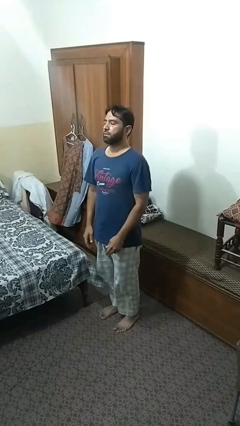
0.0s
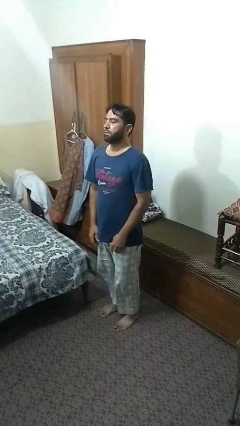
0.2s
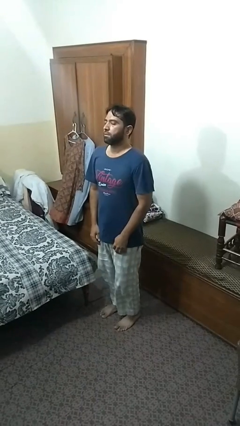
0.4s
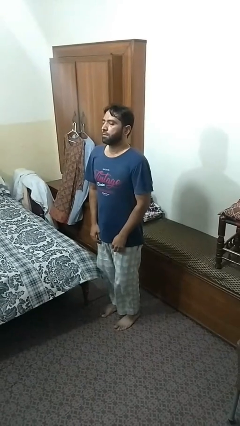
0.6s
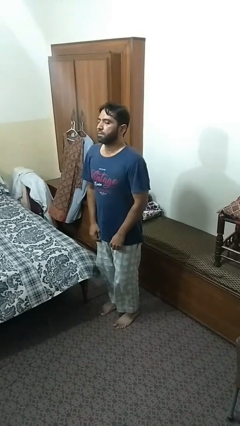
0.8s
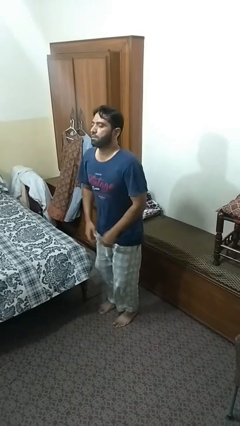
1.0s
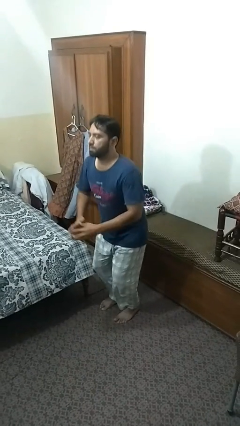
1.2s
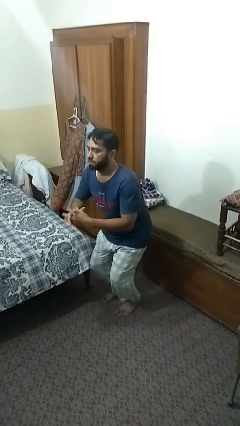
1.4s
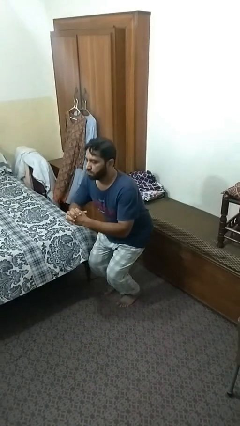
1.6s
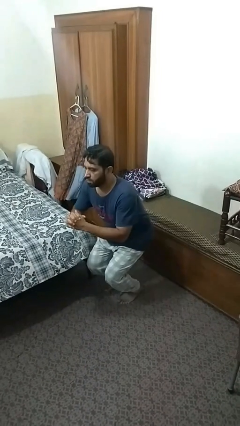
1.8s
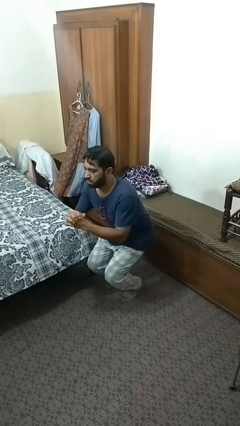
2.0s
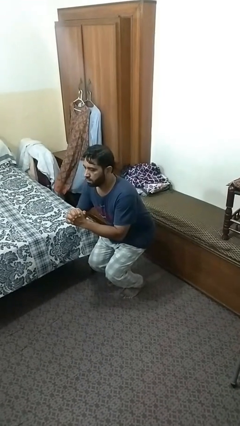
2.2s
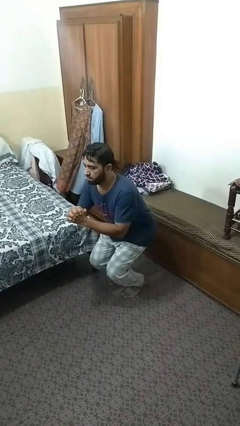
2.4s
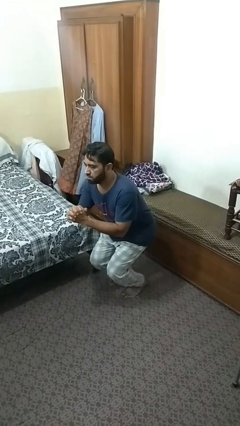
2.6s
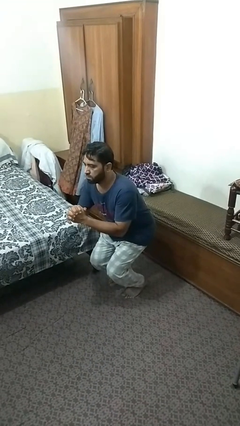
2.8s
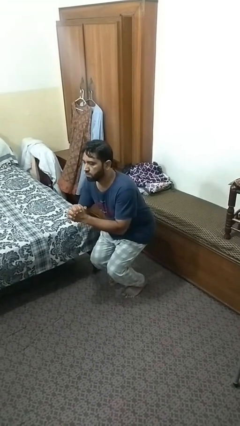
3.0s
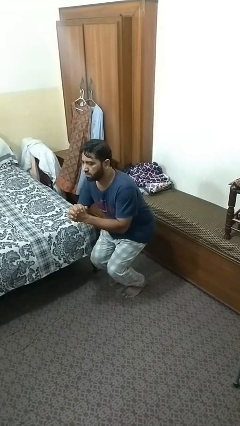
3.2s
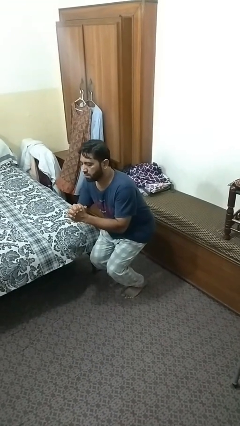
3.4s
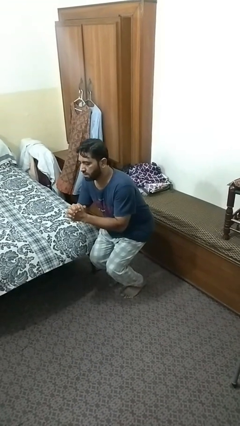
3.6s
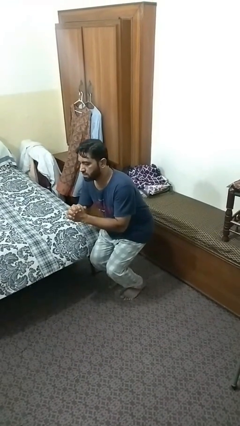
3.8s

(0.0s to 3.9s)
person squats

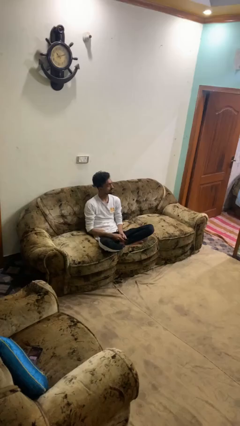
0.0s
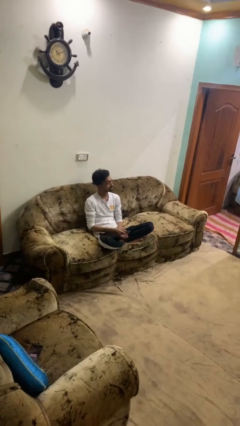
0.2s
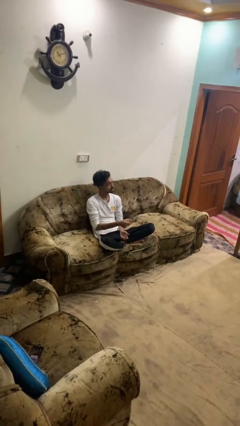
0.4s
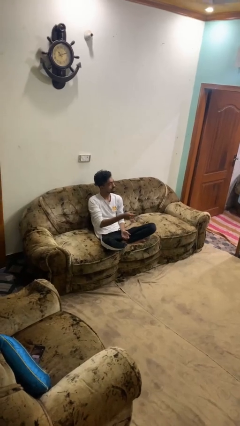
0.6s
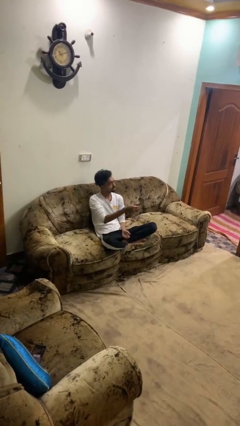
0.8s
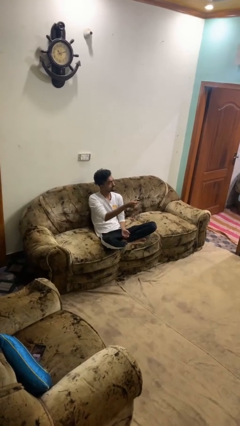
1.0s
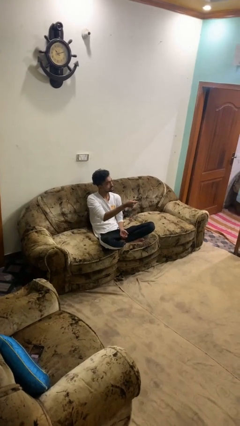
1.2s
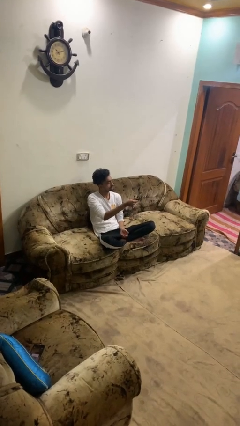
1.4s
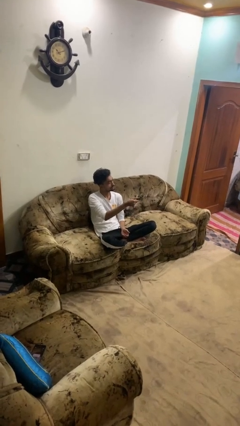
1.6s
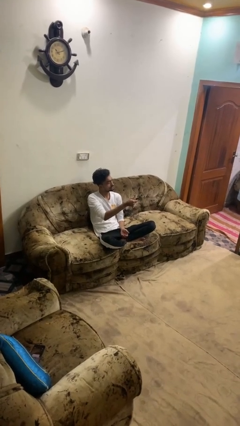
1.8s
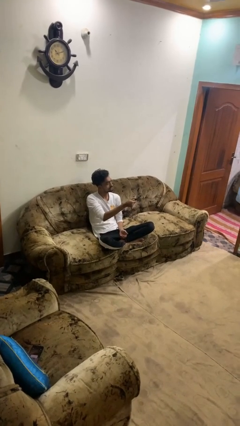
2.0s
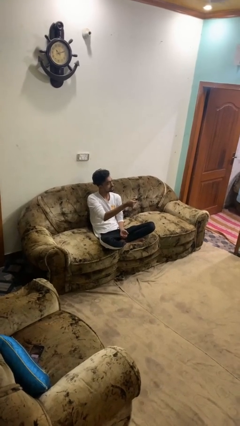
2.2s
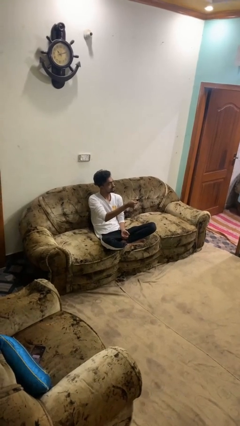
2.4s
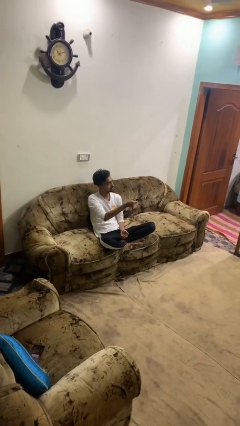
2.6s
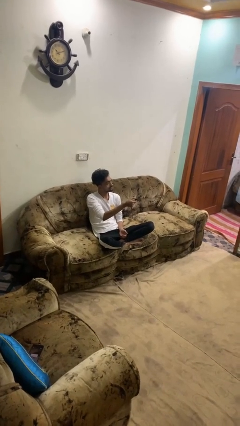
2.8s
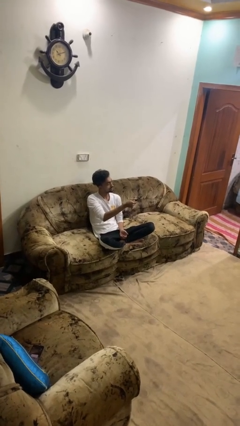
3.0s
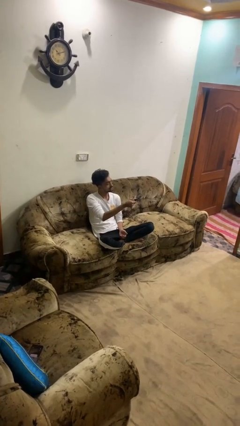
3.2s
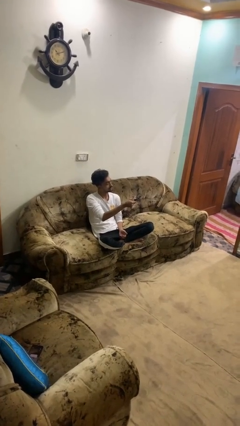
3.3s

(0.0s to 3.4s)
person uses television remote

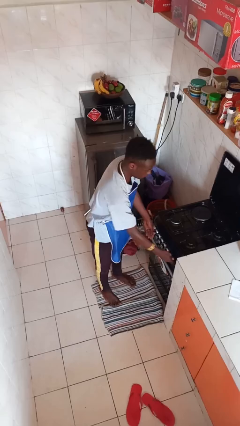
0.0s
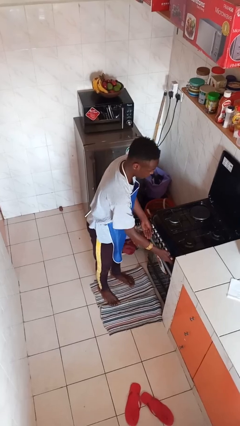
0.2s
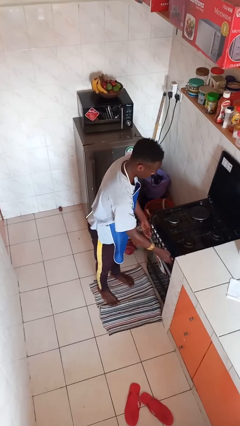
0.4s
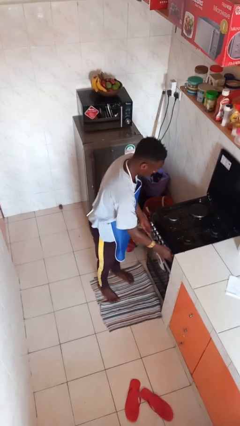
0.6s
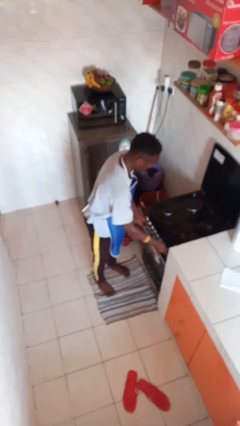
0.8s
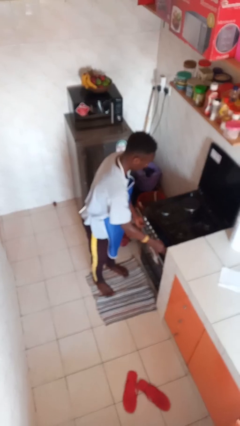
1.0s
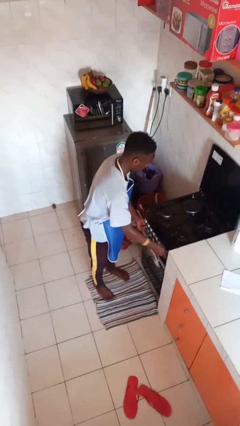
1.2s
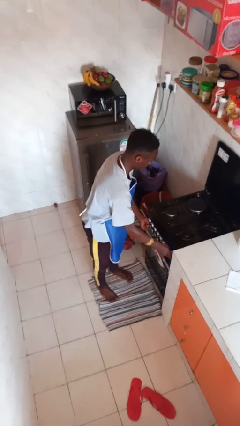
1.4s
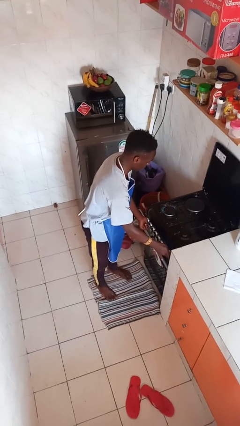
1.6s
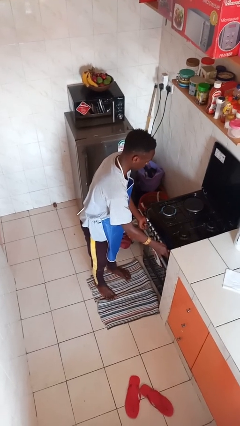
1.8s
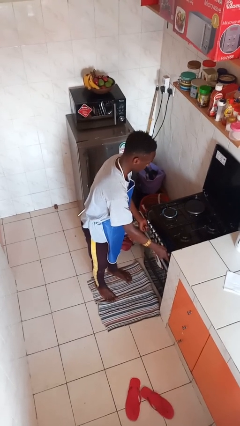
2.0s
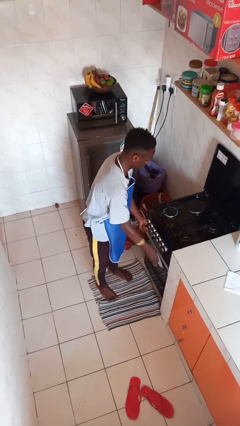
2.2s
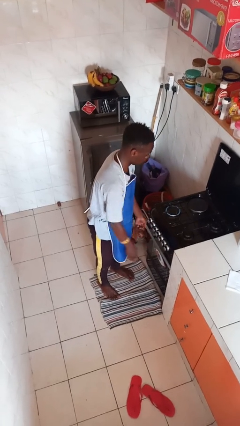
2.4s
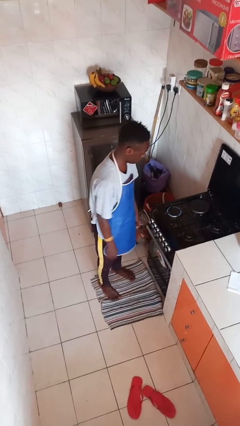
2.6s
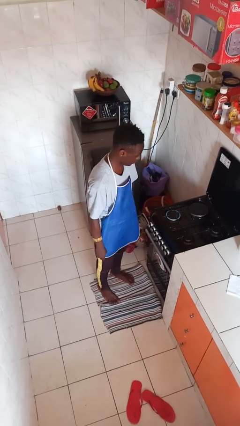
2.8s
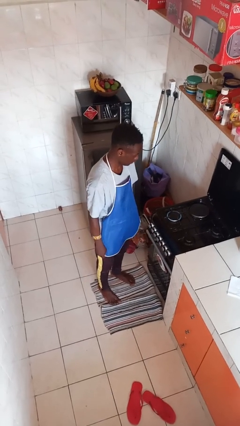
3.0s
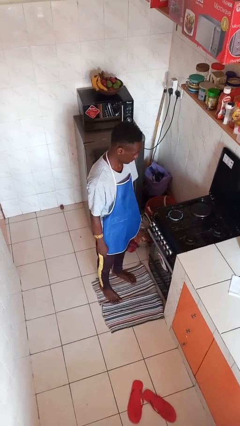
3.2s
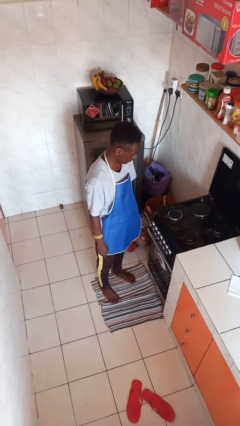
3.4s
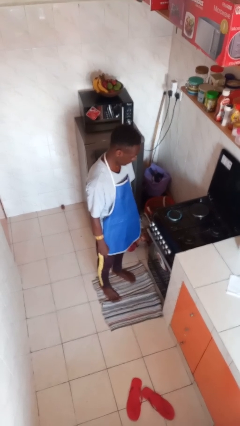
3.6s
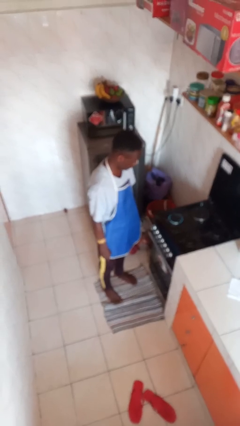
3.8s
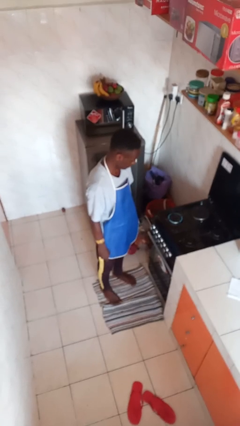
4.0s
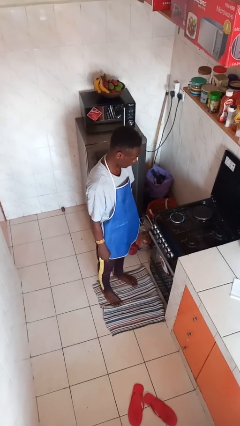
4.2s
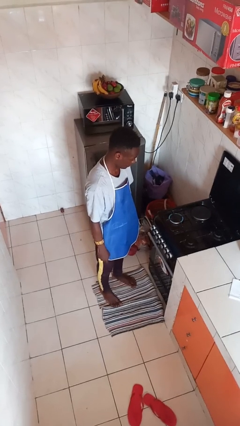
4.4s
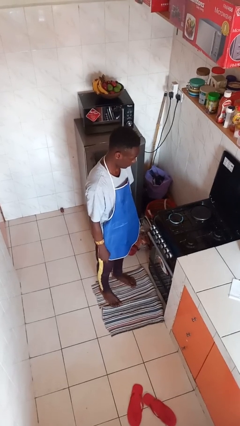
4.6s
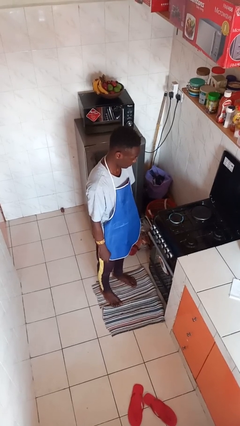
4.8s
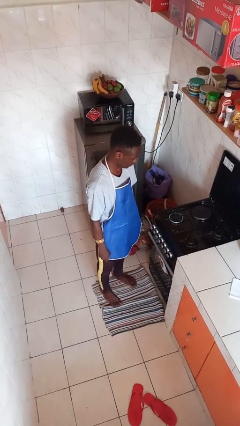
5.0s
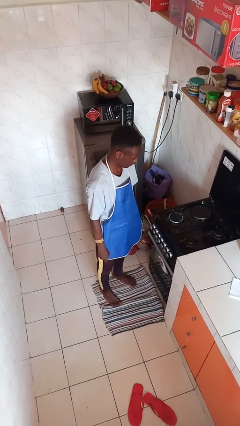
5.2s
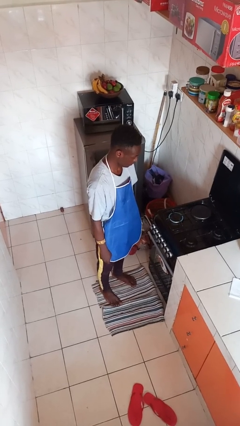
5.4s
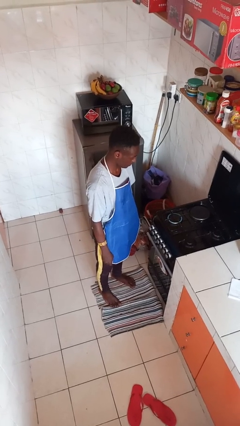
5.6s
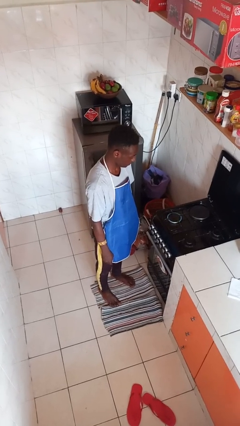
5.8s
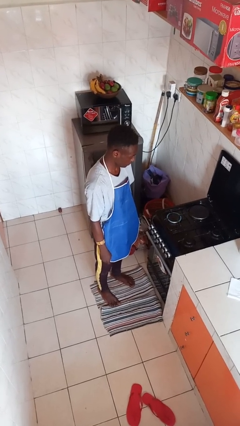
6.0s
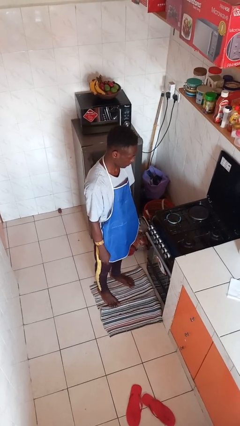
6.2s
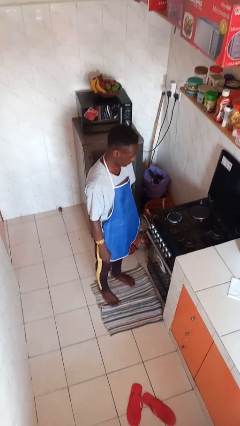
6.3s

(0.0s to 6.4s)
person turns on stovetop

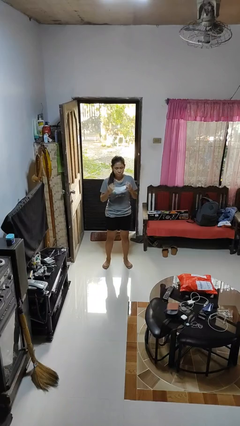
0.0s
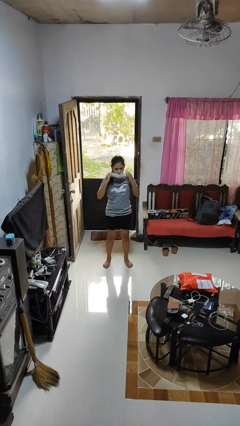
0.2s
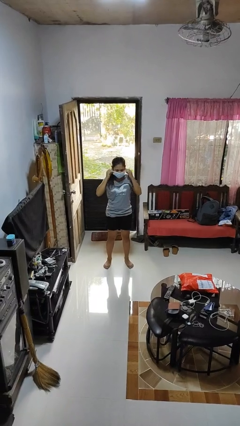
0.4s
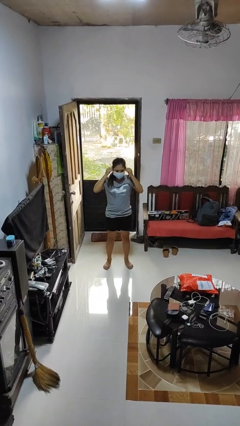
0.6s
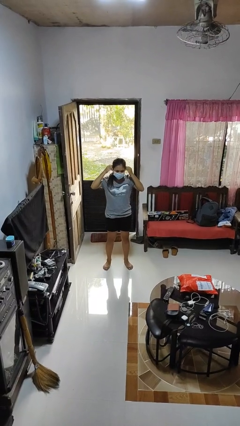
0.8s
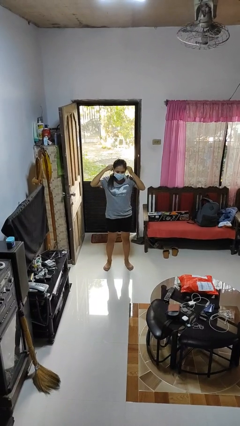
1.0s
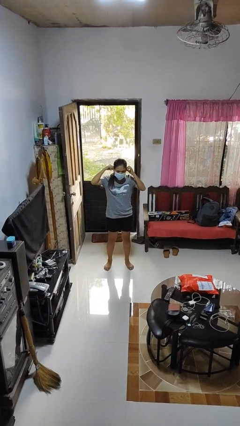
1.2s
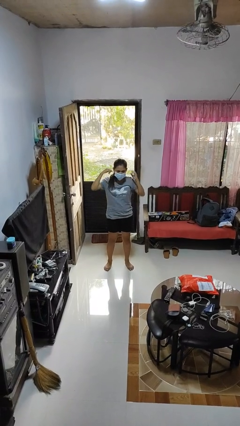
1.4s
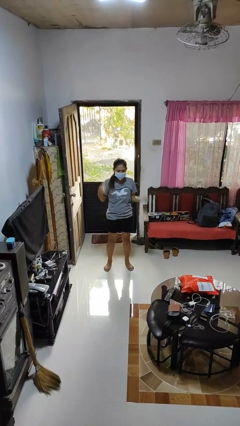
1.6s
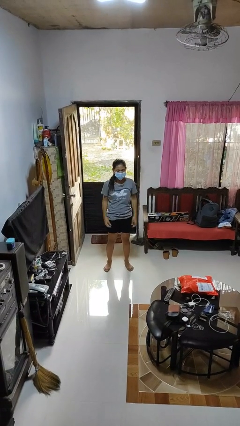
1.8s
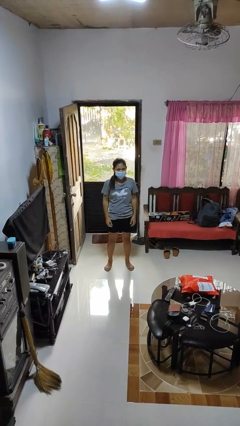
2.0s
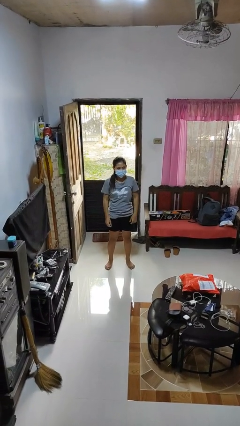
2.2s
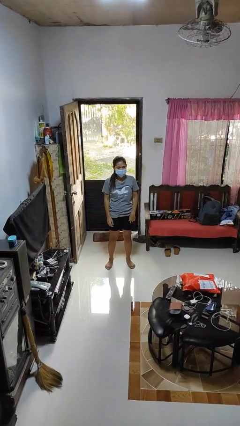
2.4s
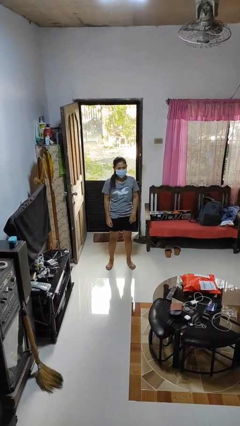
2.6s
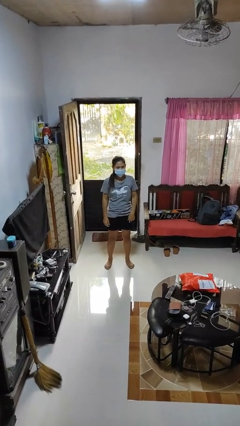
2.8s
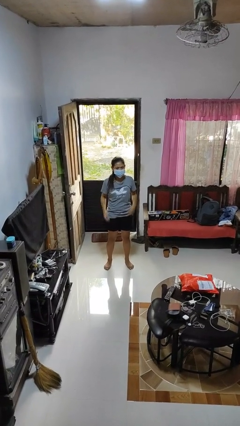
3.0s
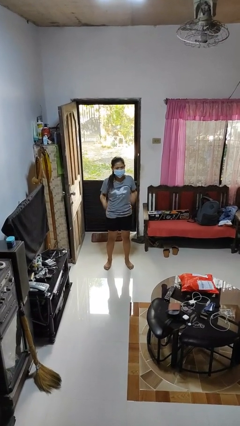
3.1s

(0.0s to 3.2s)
person puts on facemask

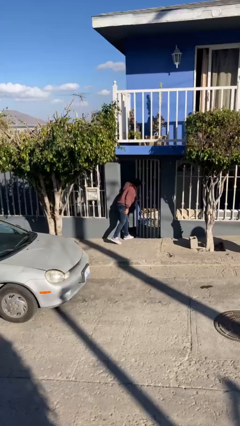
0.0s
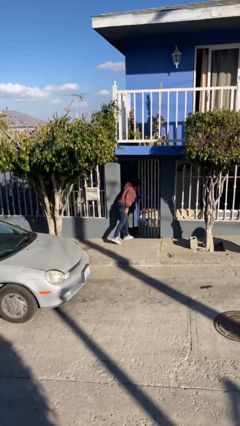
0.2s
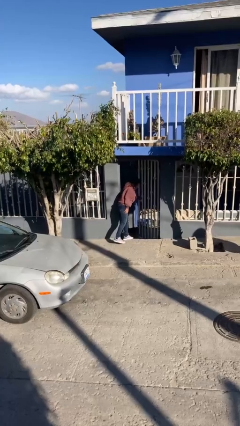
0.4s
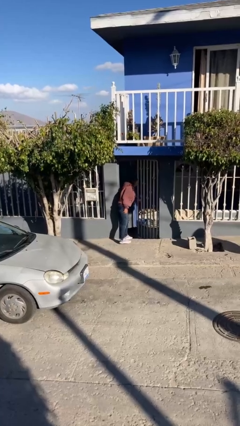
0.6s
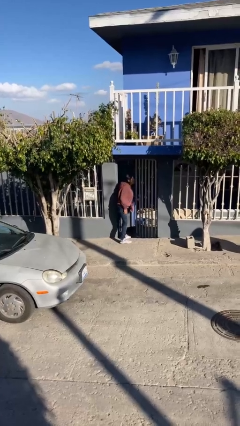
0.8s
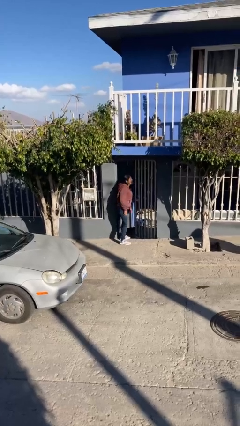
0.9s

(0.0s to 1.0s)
person opens facility door

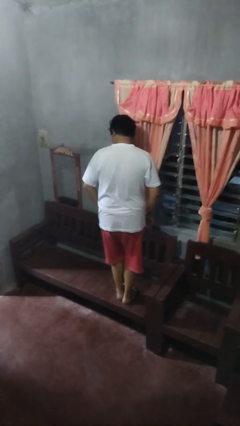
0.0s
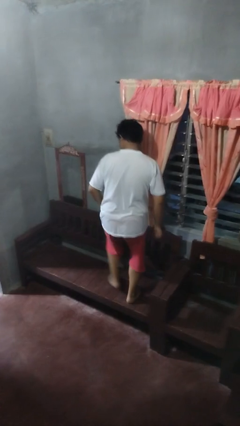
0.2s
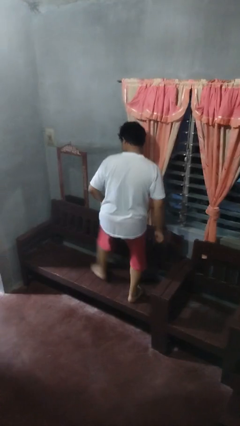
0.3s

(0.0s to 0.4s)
person jumps on couch
